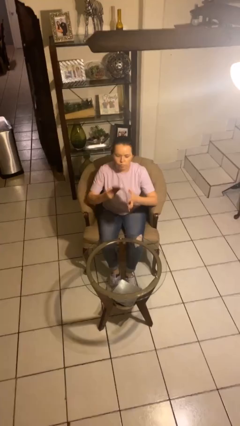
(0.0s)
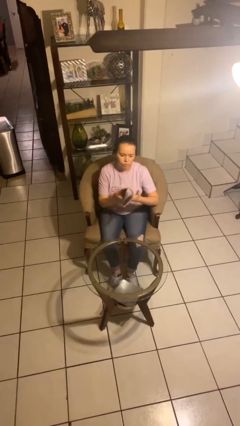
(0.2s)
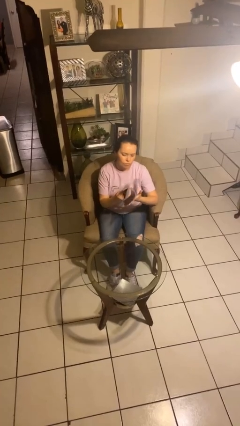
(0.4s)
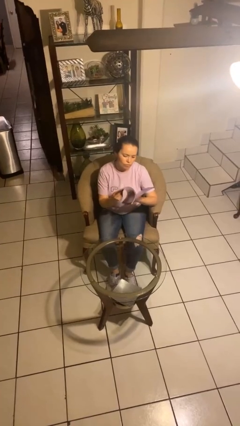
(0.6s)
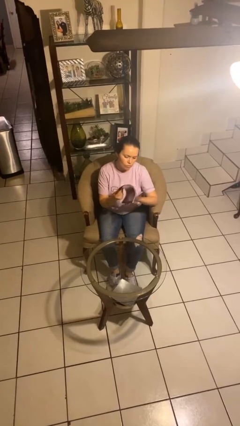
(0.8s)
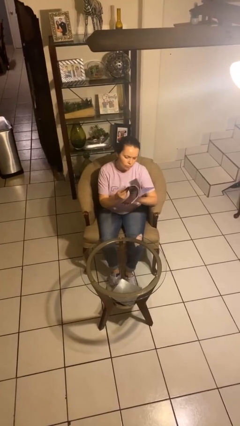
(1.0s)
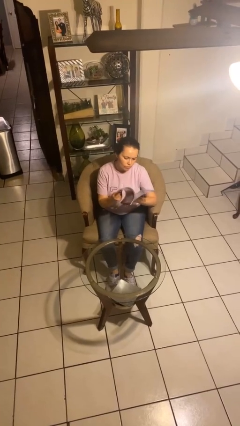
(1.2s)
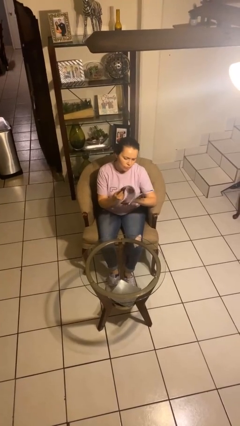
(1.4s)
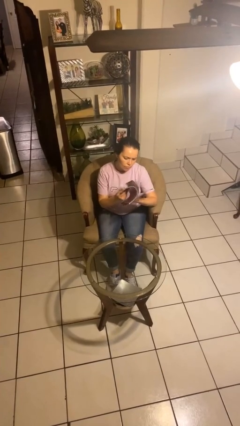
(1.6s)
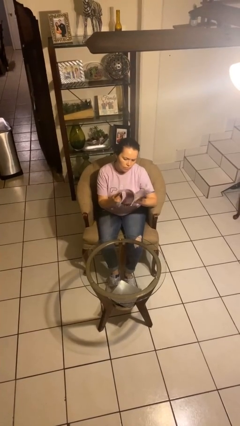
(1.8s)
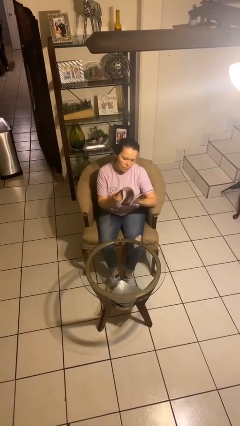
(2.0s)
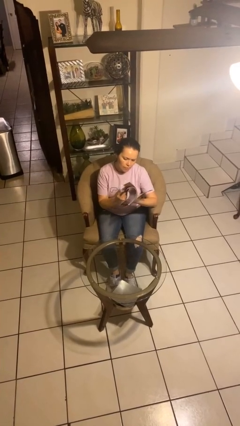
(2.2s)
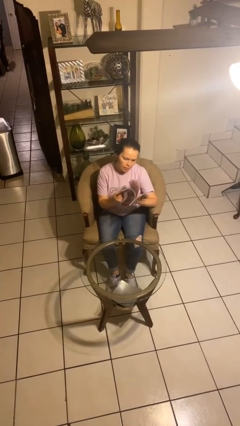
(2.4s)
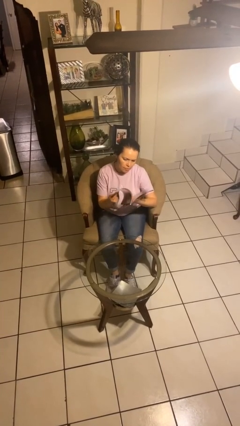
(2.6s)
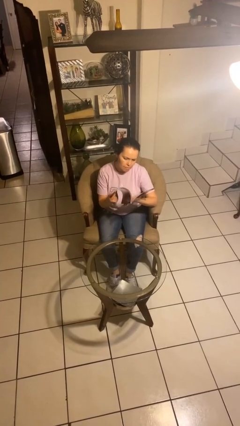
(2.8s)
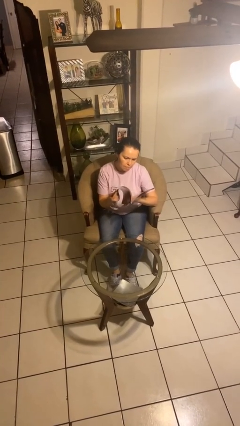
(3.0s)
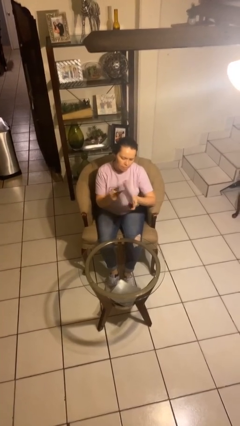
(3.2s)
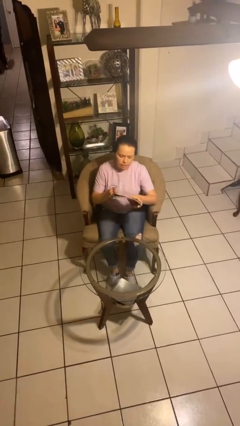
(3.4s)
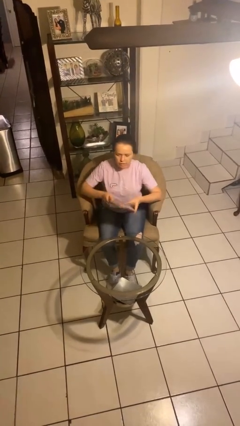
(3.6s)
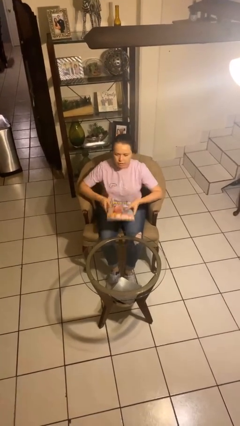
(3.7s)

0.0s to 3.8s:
person reads magazine

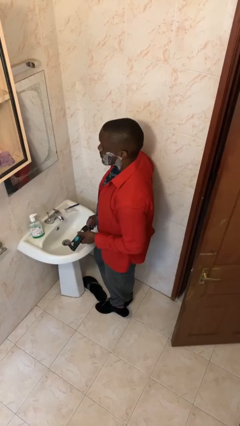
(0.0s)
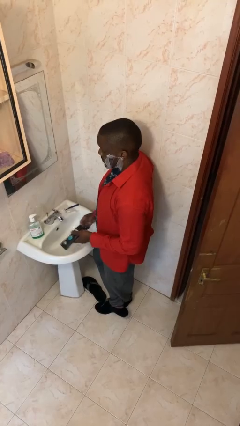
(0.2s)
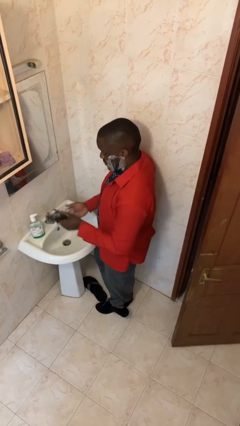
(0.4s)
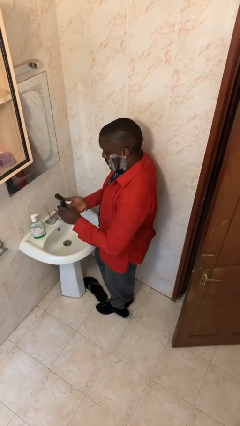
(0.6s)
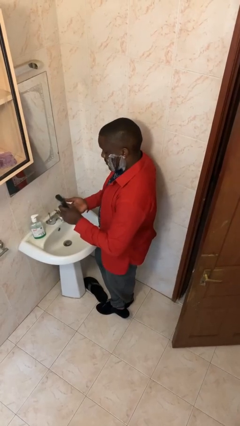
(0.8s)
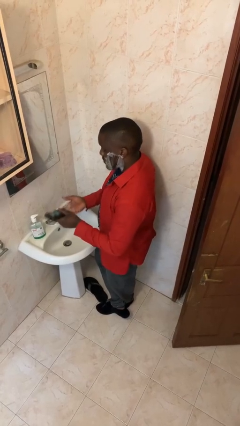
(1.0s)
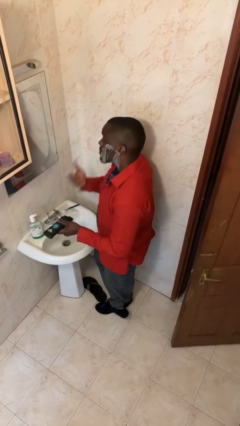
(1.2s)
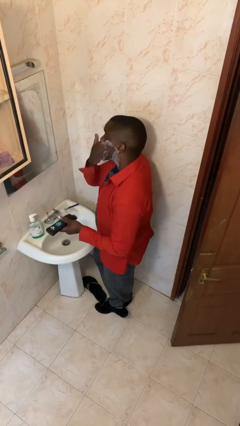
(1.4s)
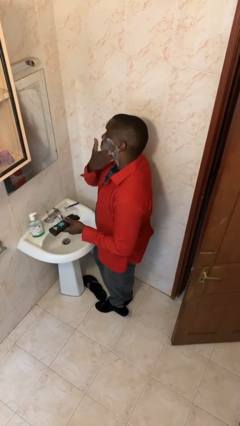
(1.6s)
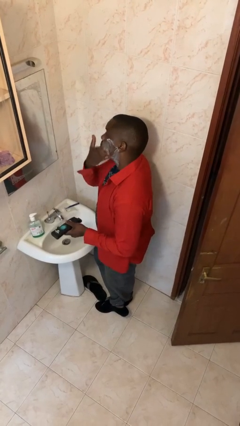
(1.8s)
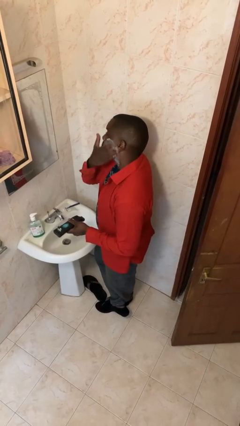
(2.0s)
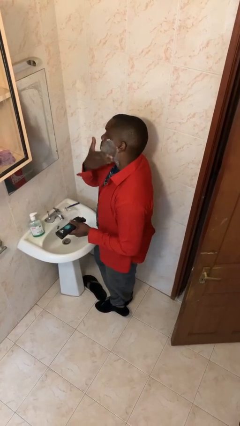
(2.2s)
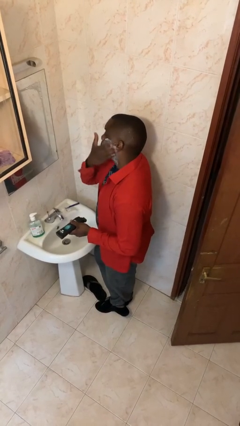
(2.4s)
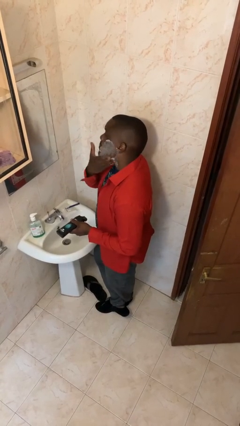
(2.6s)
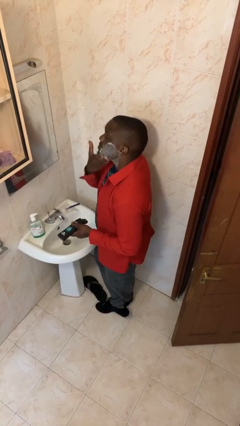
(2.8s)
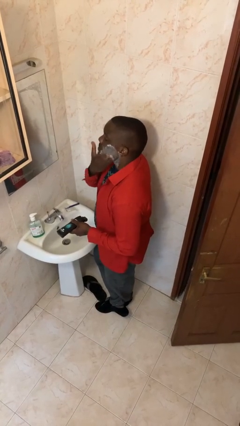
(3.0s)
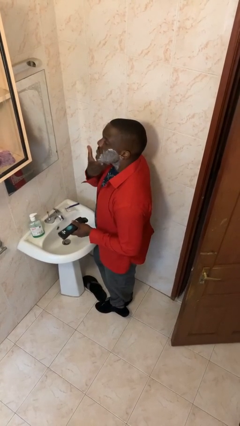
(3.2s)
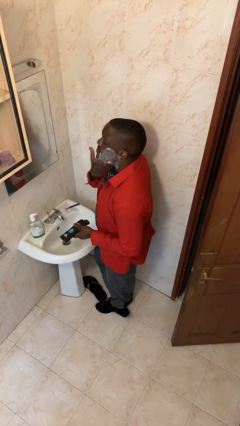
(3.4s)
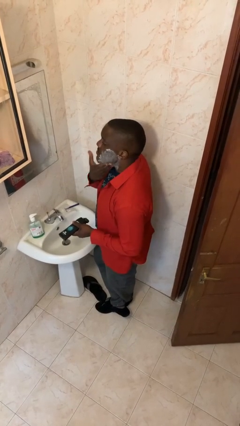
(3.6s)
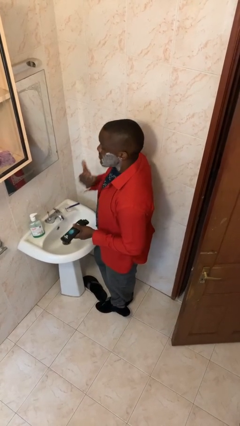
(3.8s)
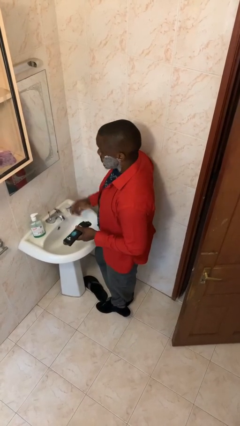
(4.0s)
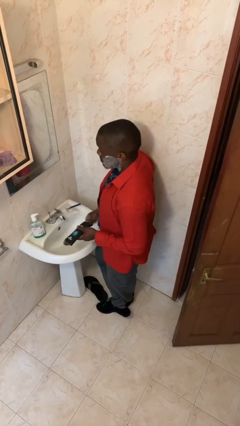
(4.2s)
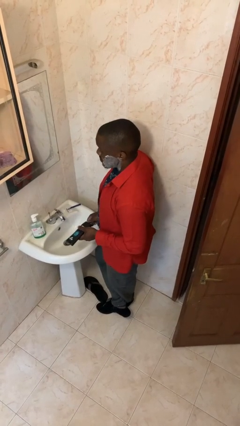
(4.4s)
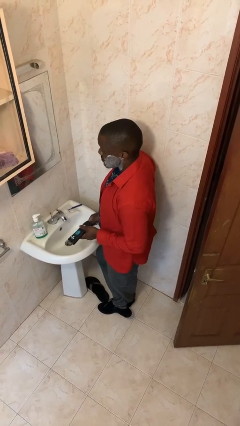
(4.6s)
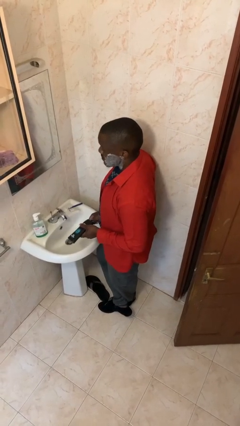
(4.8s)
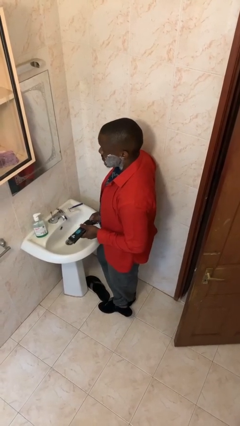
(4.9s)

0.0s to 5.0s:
person applies shaving cream

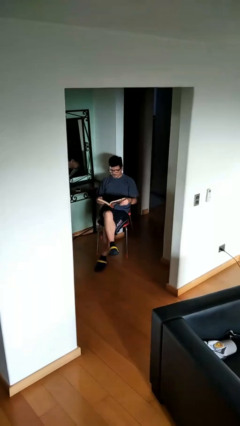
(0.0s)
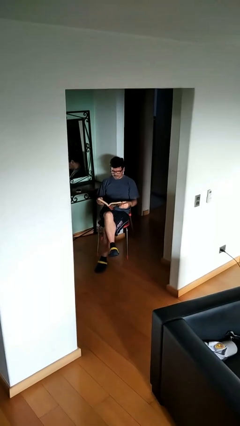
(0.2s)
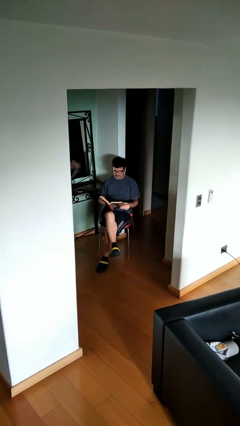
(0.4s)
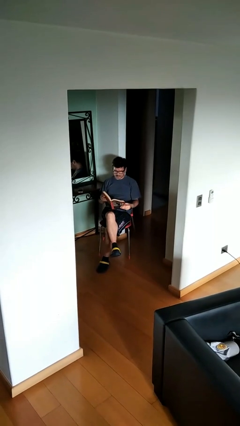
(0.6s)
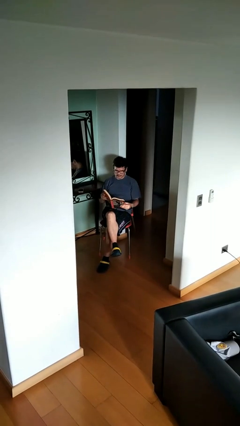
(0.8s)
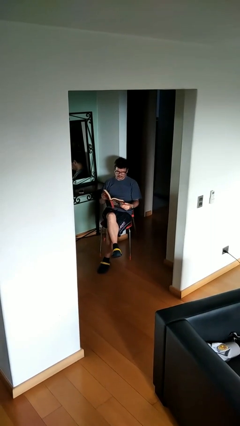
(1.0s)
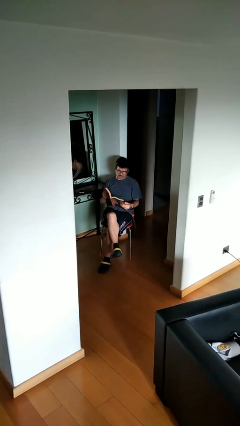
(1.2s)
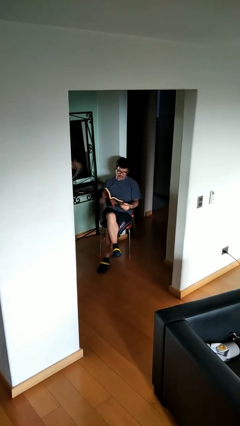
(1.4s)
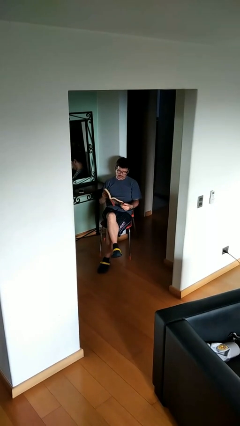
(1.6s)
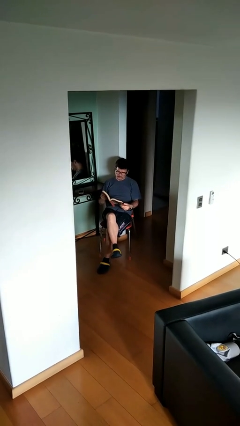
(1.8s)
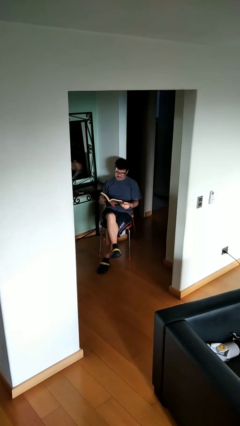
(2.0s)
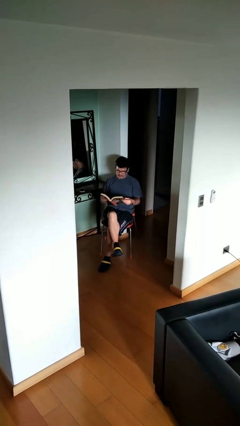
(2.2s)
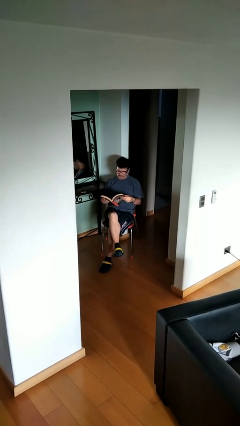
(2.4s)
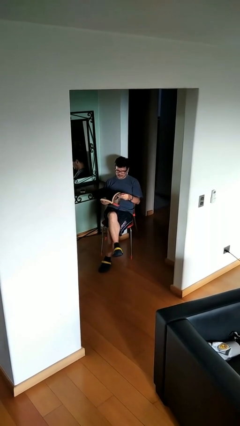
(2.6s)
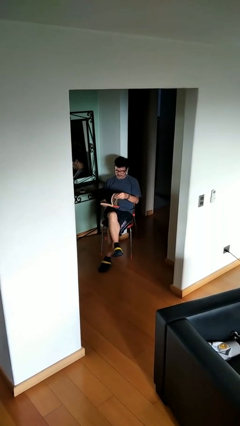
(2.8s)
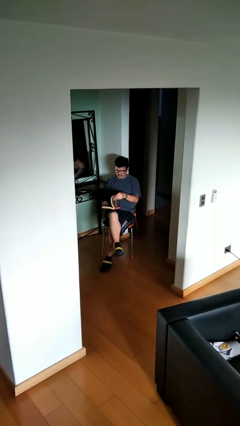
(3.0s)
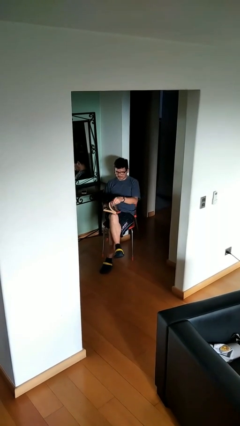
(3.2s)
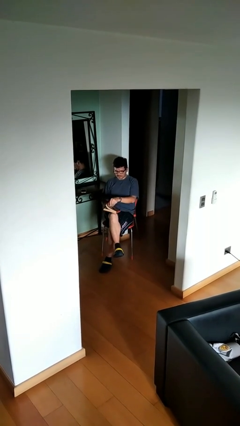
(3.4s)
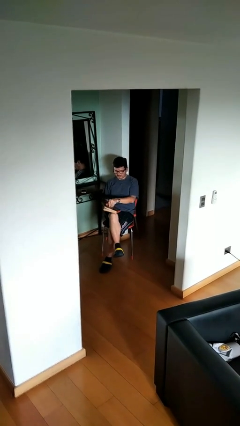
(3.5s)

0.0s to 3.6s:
person reads document

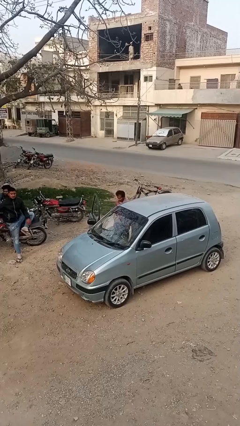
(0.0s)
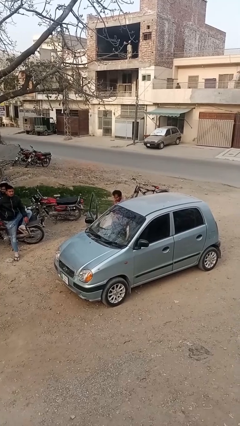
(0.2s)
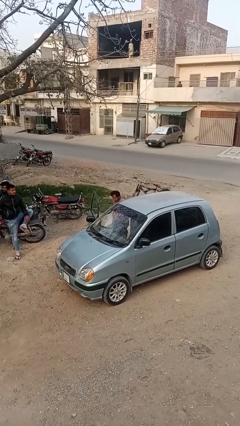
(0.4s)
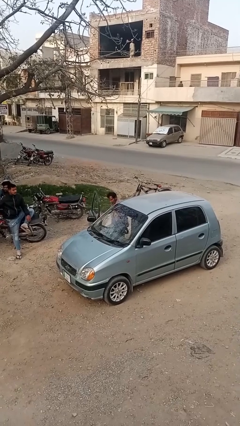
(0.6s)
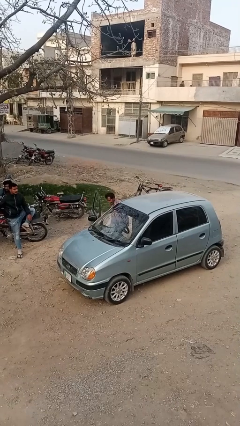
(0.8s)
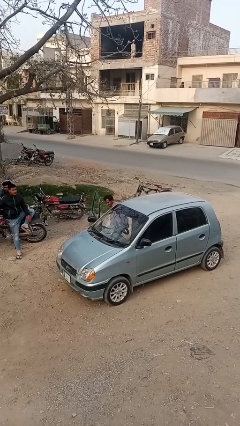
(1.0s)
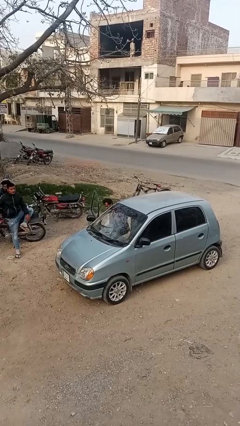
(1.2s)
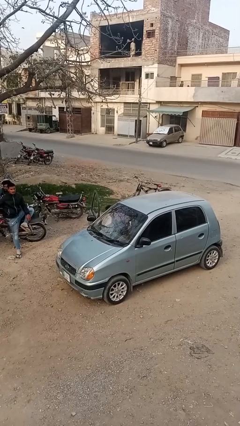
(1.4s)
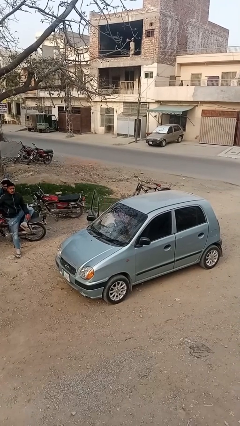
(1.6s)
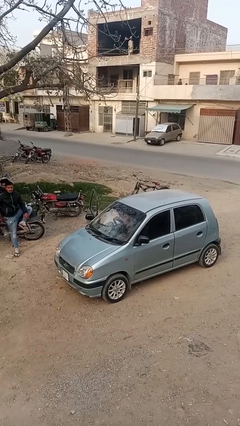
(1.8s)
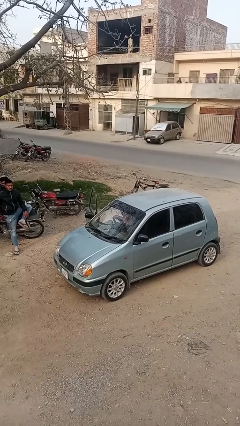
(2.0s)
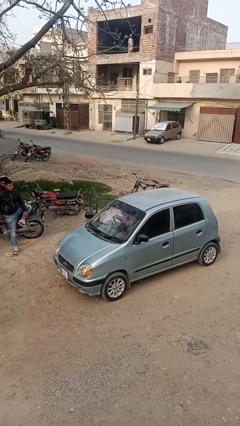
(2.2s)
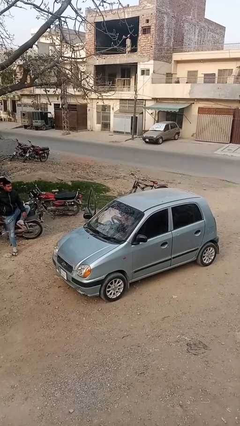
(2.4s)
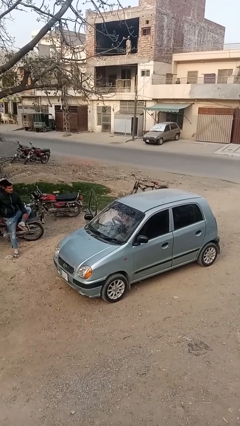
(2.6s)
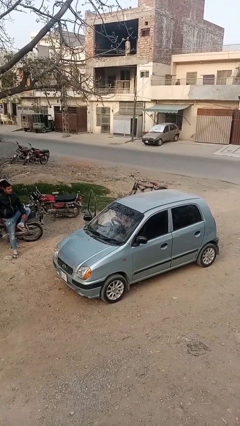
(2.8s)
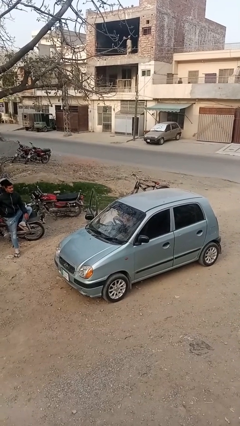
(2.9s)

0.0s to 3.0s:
person enters car

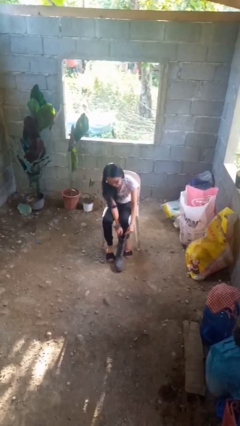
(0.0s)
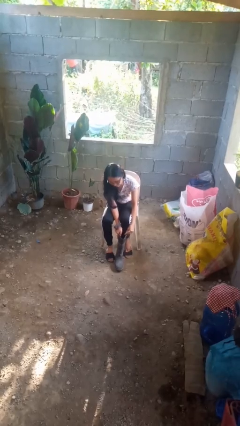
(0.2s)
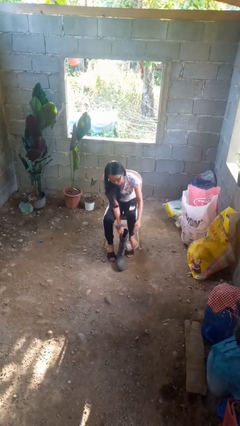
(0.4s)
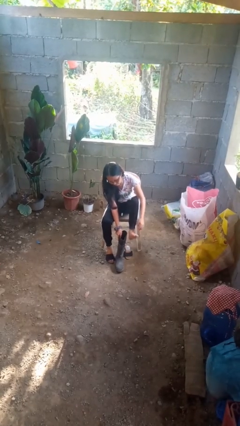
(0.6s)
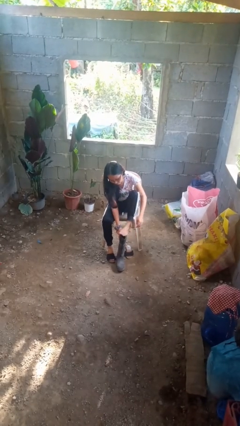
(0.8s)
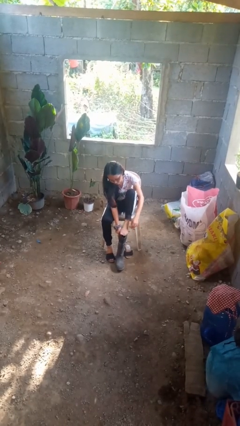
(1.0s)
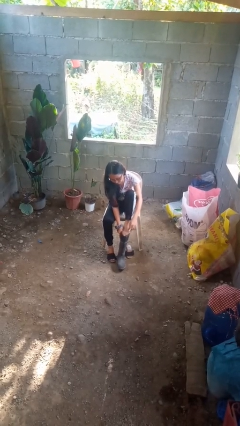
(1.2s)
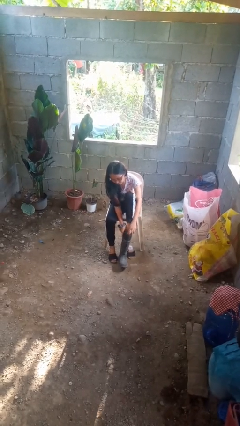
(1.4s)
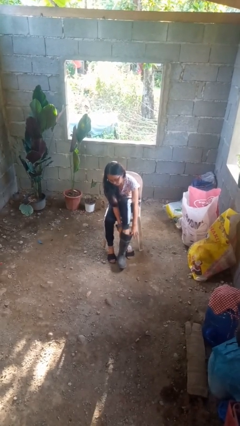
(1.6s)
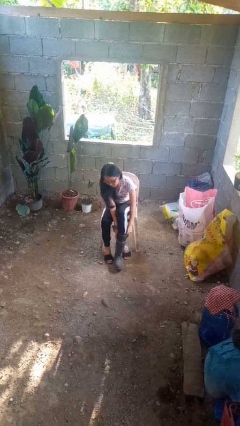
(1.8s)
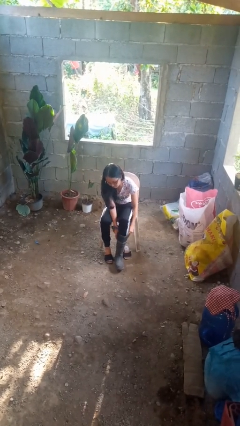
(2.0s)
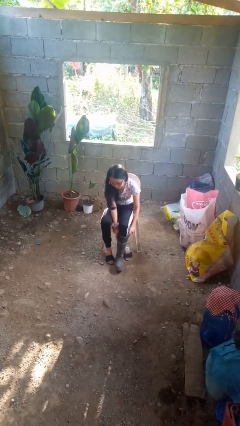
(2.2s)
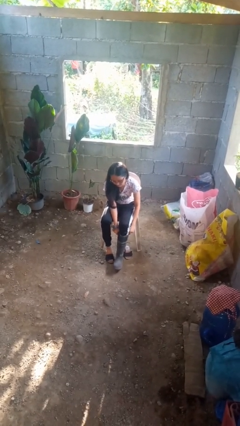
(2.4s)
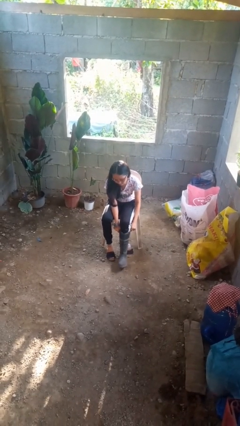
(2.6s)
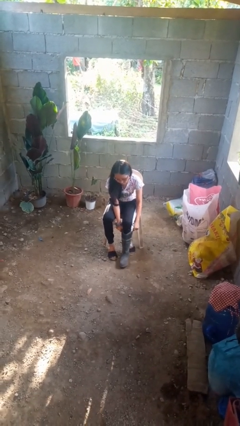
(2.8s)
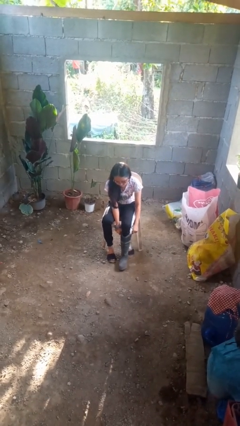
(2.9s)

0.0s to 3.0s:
person puts on boots
